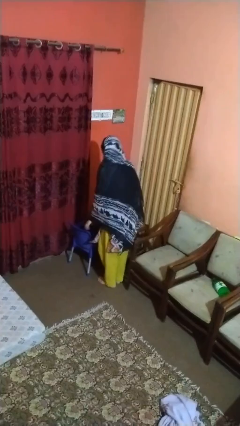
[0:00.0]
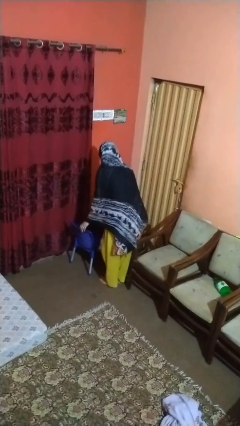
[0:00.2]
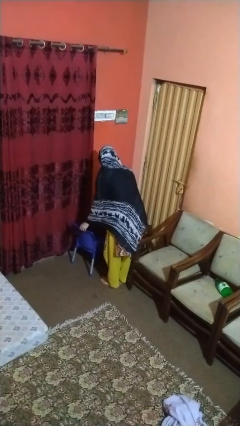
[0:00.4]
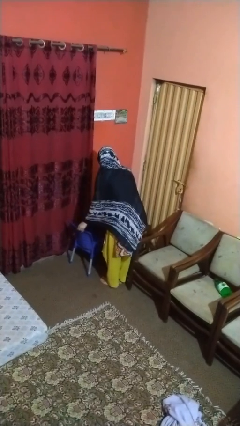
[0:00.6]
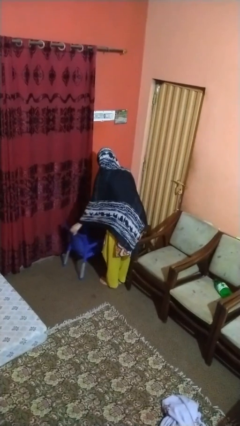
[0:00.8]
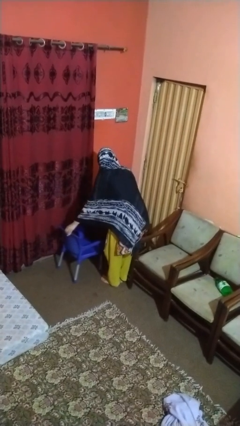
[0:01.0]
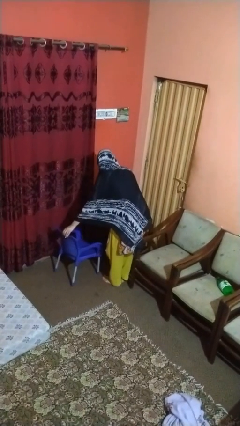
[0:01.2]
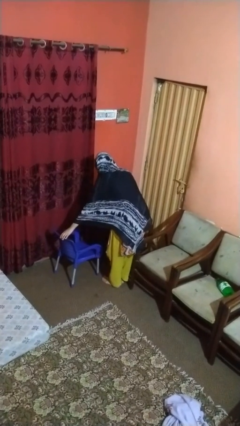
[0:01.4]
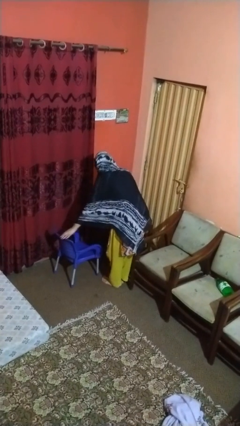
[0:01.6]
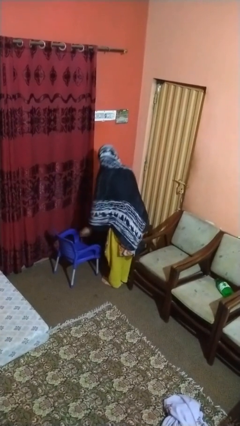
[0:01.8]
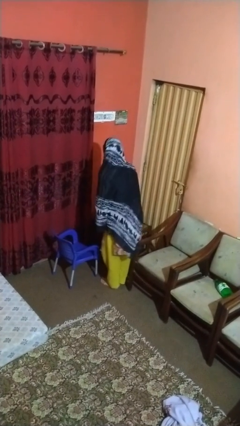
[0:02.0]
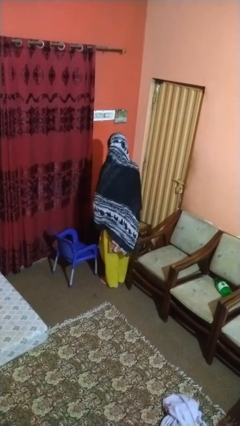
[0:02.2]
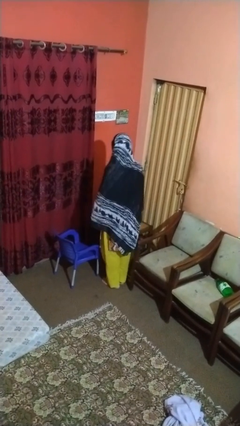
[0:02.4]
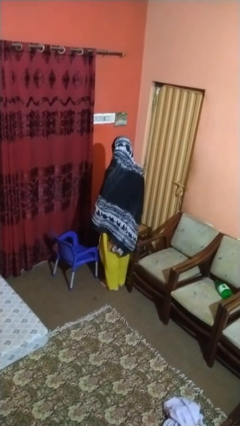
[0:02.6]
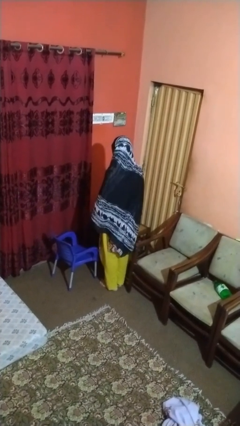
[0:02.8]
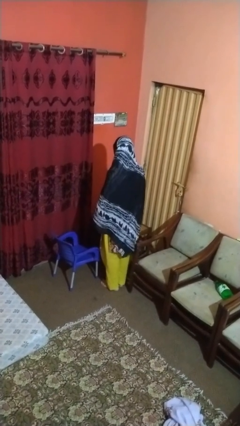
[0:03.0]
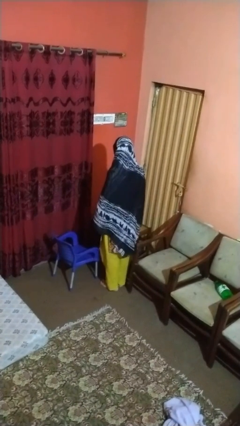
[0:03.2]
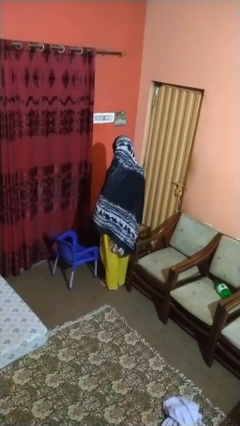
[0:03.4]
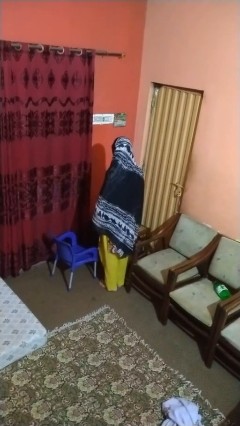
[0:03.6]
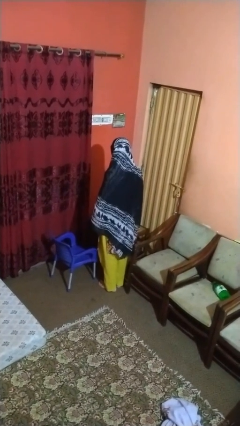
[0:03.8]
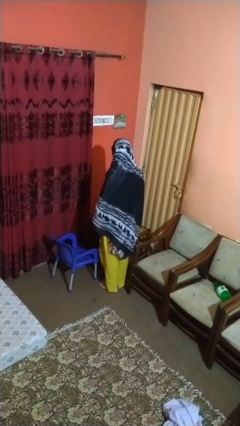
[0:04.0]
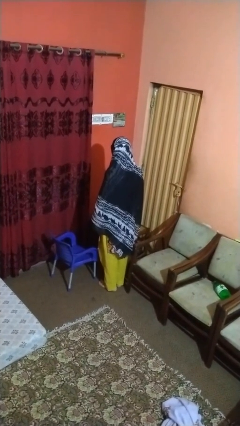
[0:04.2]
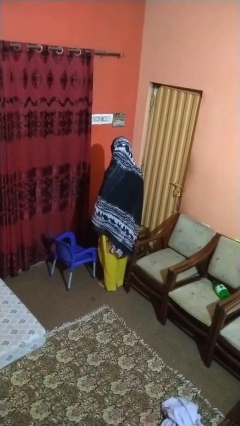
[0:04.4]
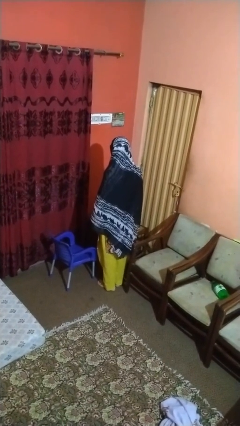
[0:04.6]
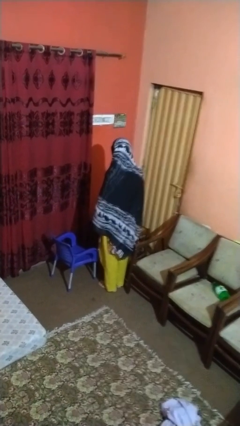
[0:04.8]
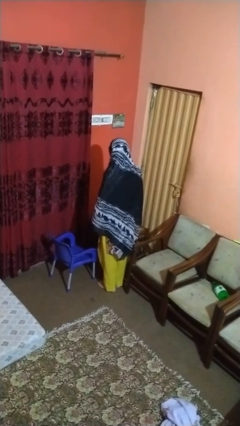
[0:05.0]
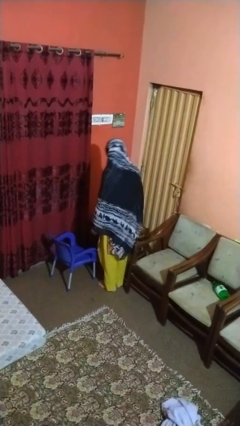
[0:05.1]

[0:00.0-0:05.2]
person pulls out chair

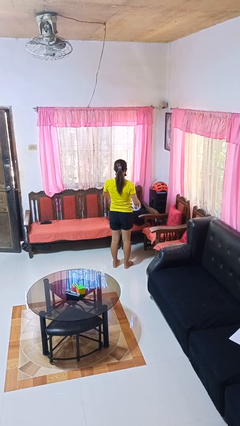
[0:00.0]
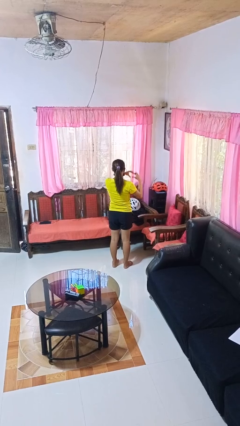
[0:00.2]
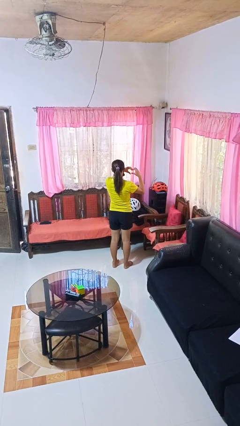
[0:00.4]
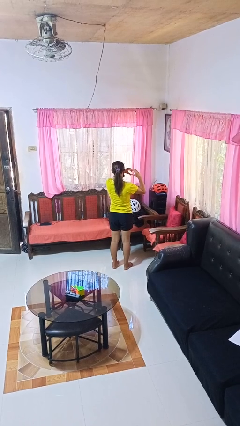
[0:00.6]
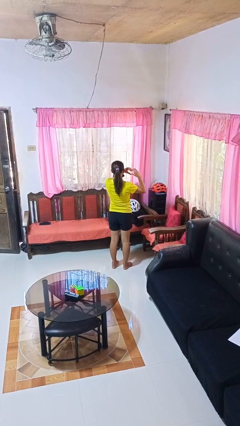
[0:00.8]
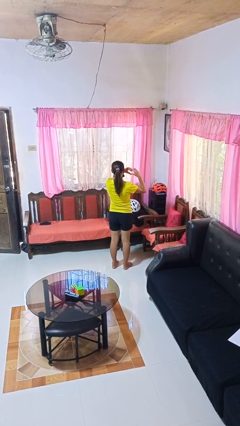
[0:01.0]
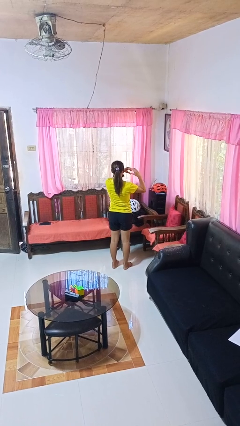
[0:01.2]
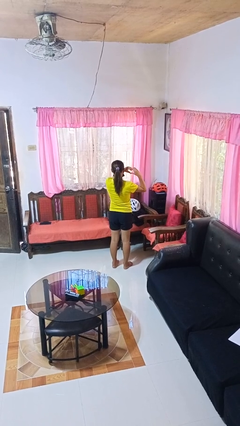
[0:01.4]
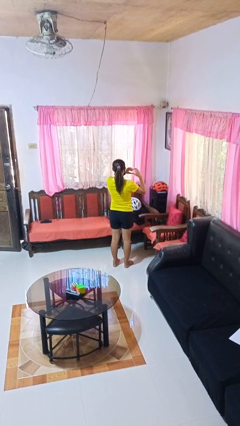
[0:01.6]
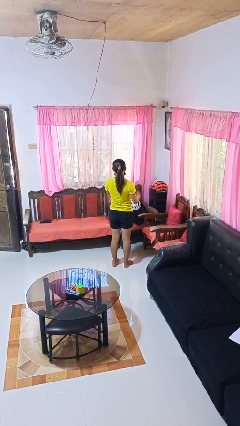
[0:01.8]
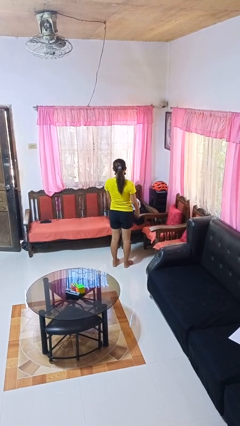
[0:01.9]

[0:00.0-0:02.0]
person gestures heart

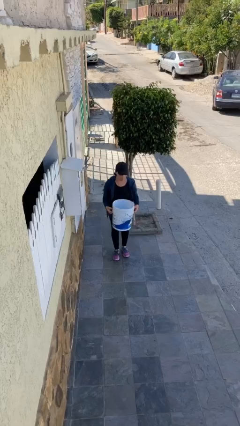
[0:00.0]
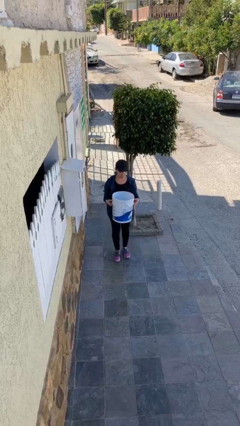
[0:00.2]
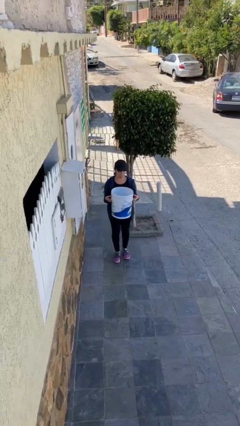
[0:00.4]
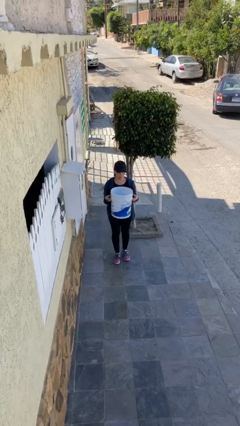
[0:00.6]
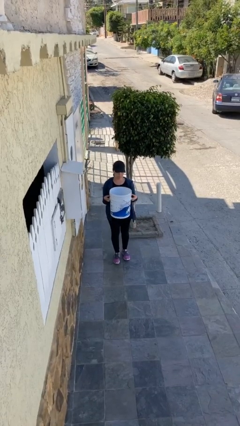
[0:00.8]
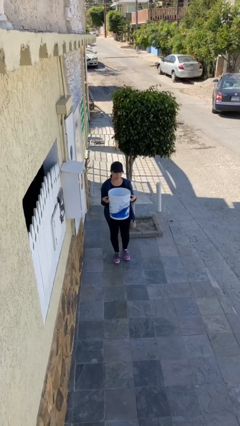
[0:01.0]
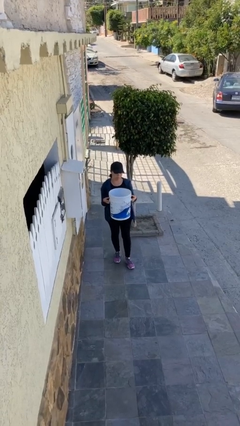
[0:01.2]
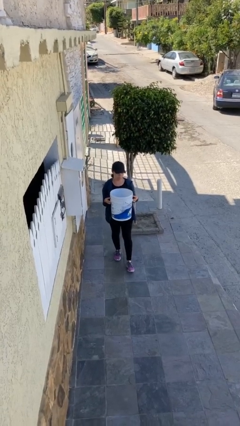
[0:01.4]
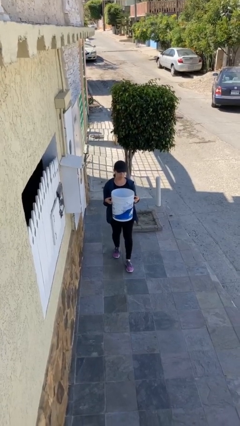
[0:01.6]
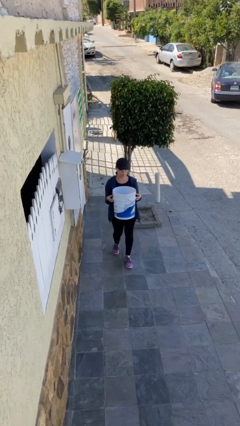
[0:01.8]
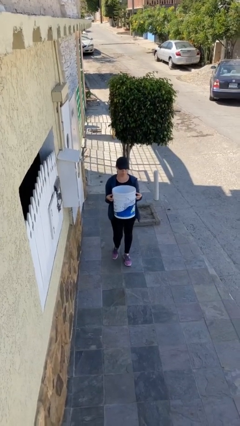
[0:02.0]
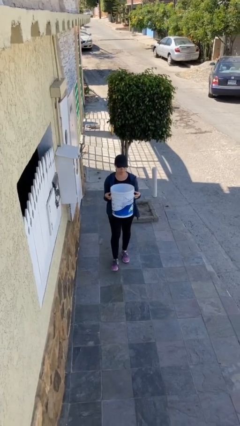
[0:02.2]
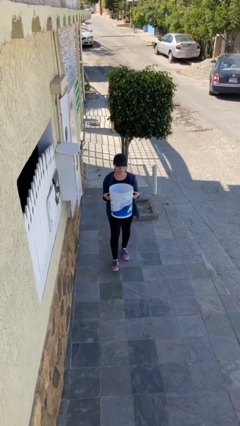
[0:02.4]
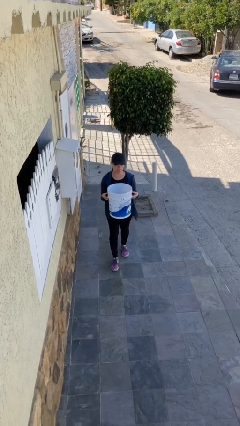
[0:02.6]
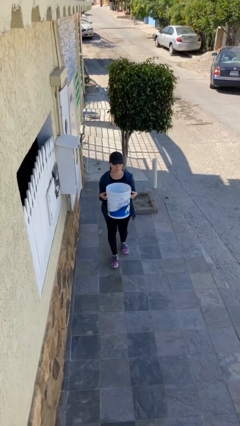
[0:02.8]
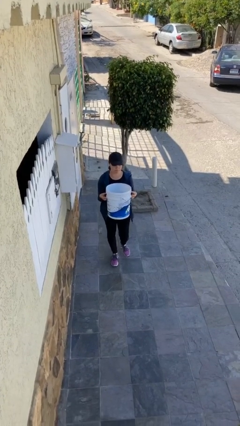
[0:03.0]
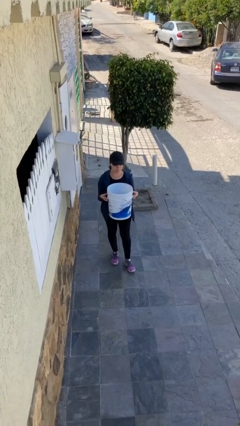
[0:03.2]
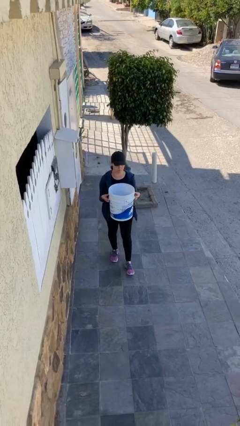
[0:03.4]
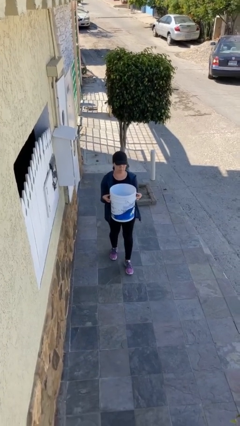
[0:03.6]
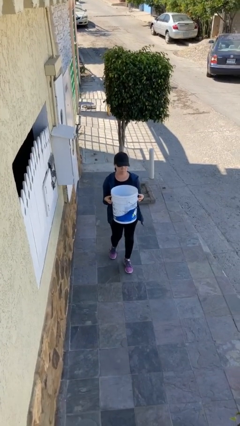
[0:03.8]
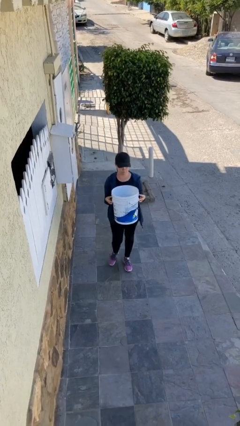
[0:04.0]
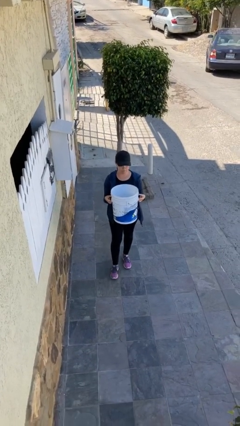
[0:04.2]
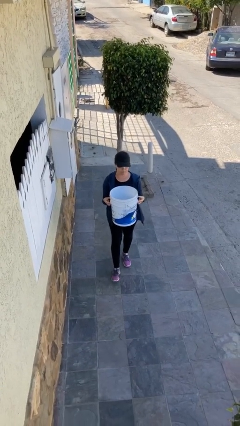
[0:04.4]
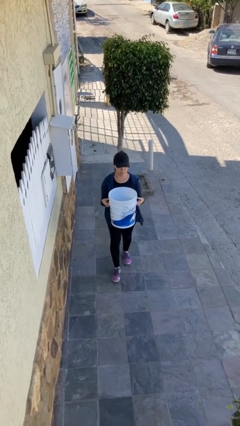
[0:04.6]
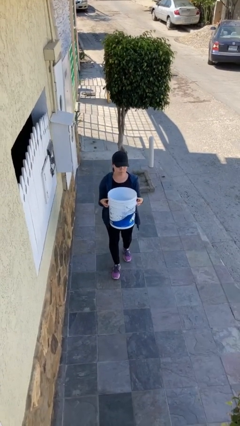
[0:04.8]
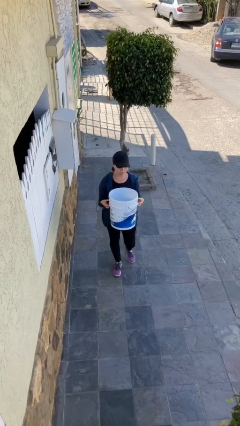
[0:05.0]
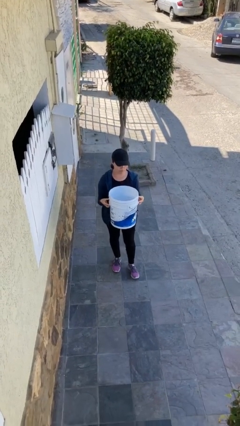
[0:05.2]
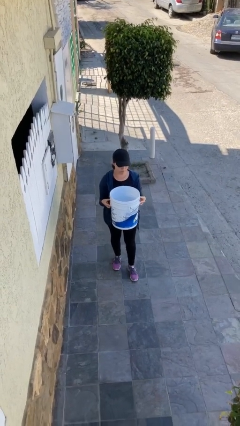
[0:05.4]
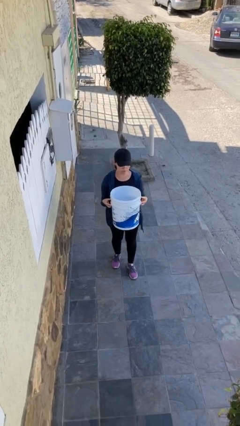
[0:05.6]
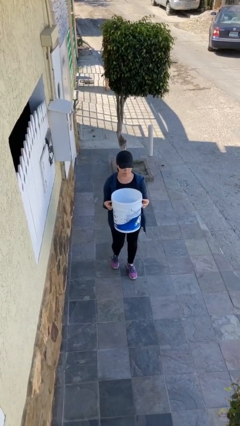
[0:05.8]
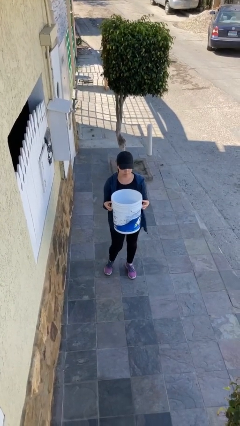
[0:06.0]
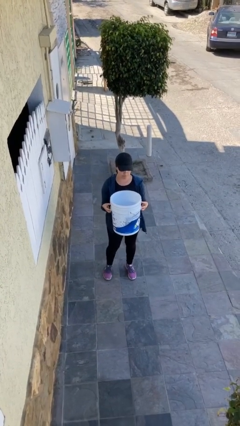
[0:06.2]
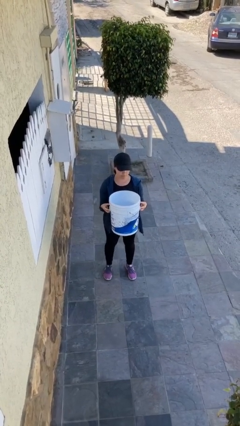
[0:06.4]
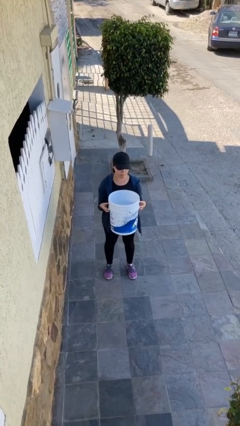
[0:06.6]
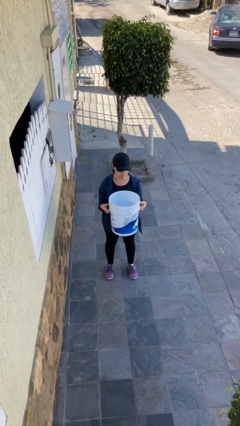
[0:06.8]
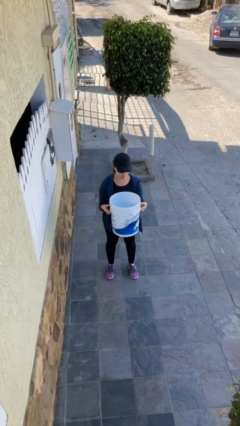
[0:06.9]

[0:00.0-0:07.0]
person carries heavy object

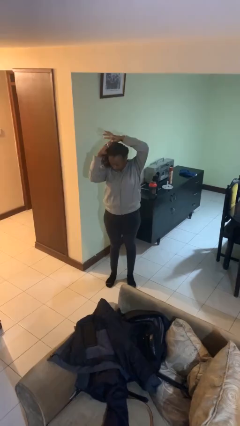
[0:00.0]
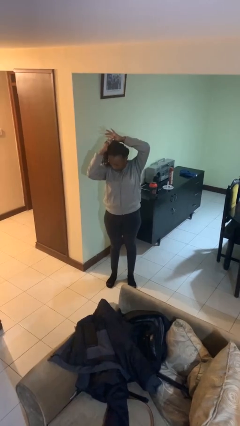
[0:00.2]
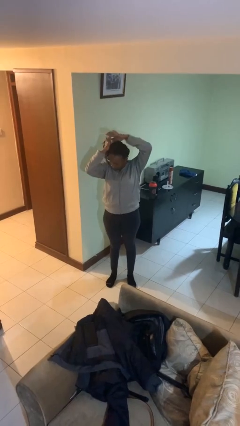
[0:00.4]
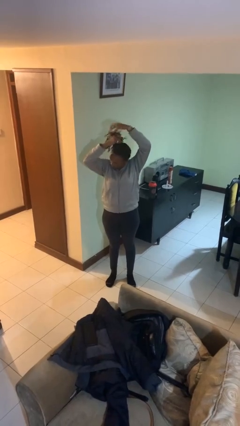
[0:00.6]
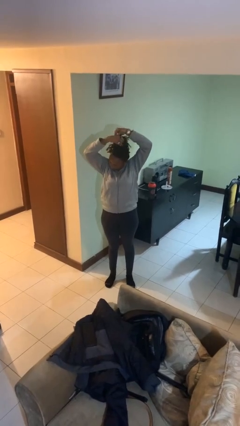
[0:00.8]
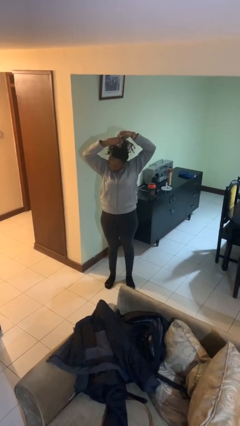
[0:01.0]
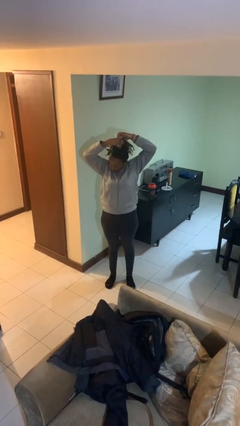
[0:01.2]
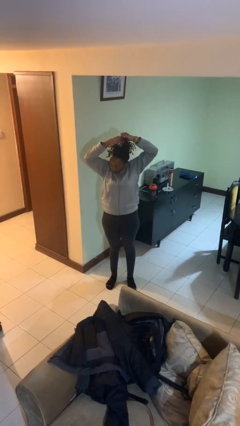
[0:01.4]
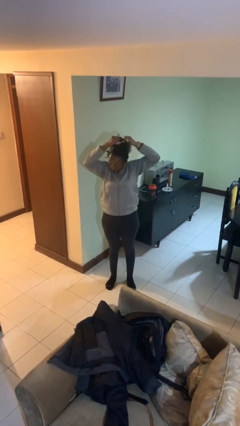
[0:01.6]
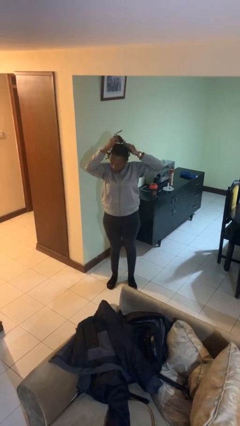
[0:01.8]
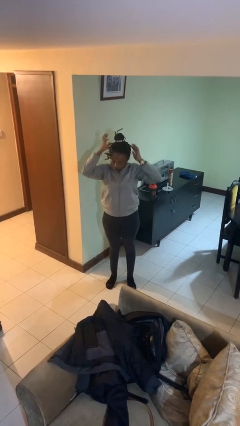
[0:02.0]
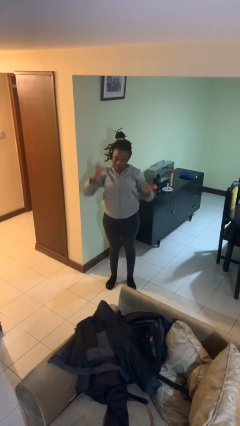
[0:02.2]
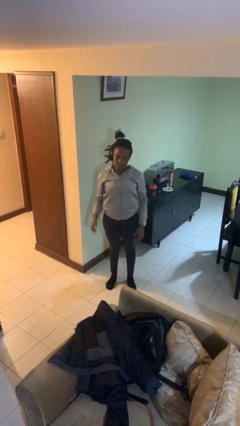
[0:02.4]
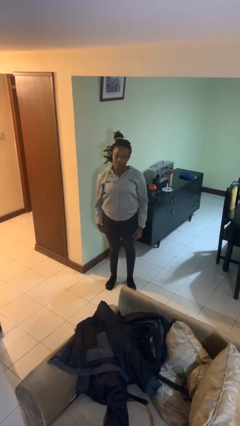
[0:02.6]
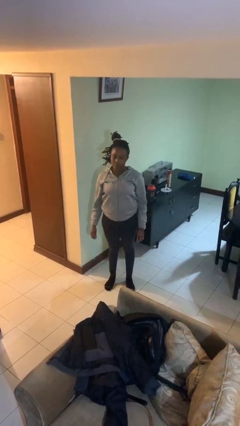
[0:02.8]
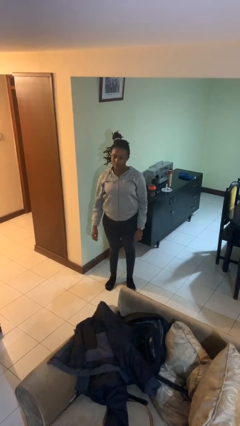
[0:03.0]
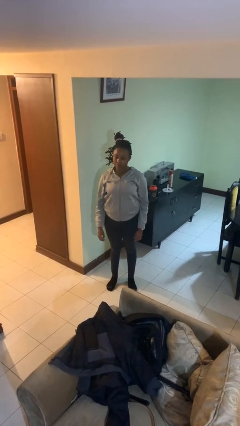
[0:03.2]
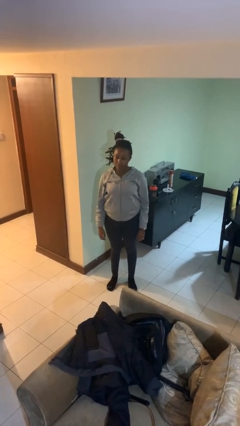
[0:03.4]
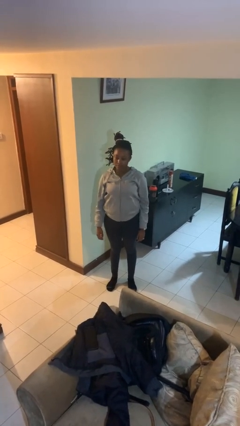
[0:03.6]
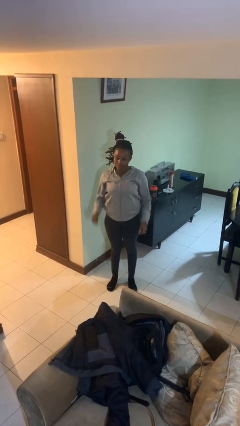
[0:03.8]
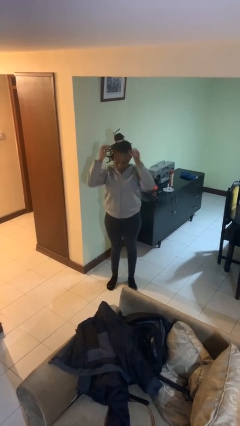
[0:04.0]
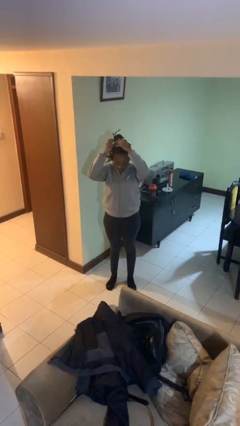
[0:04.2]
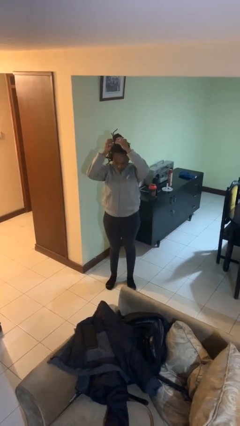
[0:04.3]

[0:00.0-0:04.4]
person puts hair in ponytail
